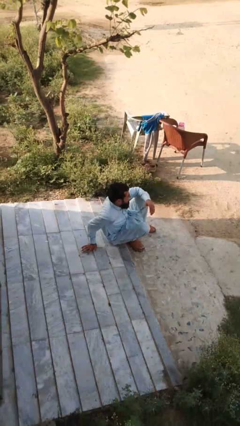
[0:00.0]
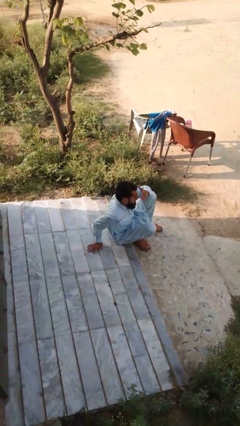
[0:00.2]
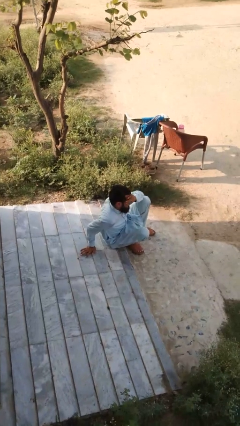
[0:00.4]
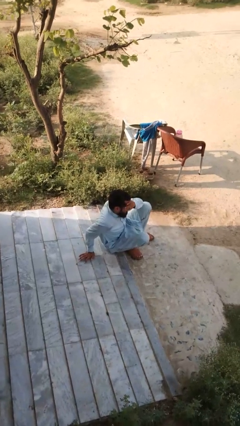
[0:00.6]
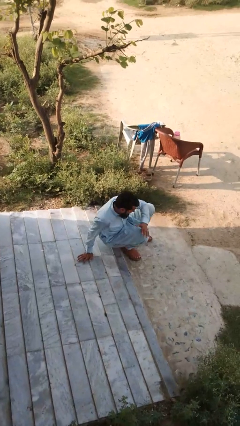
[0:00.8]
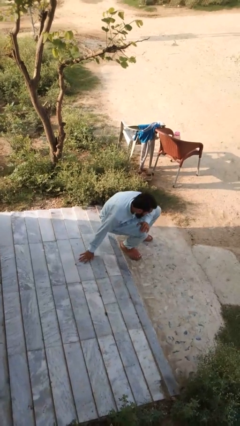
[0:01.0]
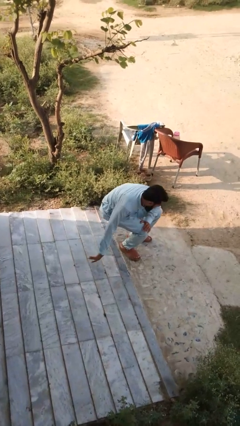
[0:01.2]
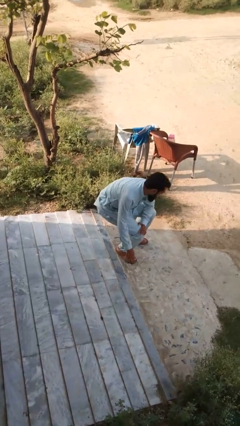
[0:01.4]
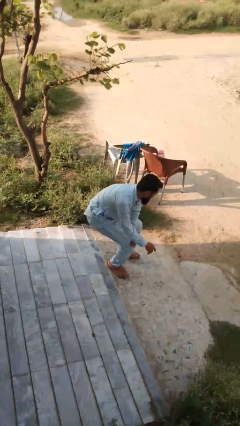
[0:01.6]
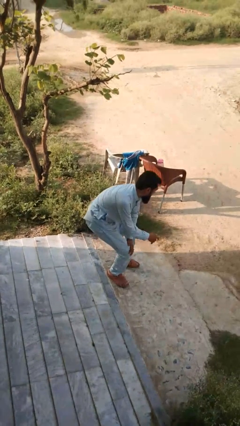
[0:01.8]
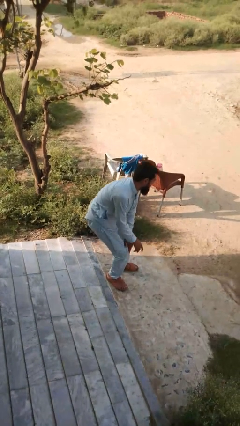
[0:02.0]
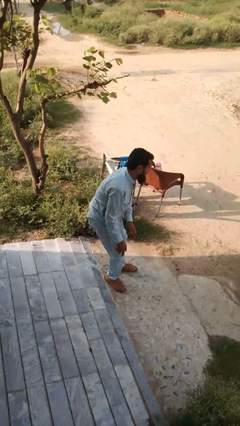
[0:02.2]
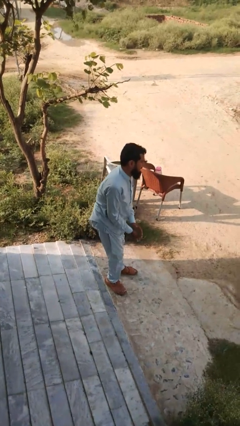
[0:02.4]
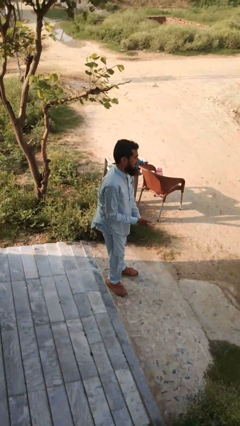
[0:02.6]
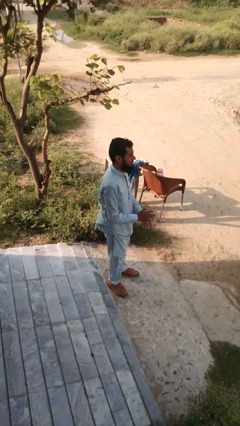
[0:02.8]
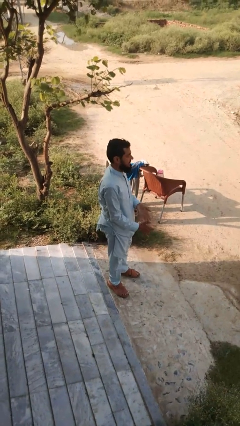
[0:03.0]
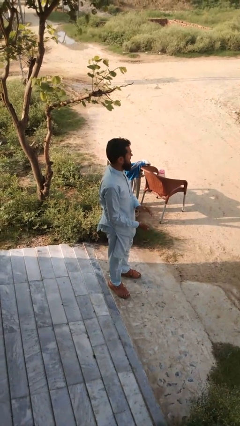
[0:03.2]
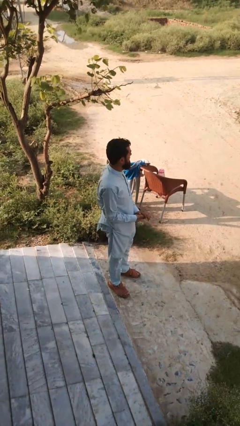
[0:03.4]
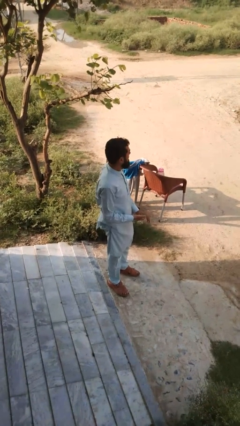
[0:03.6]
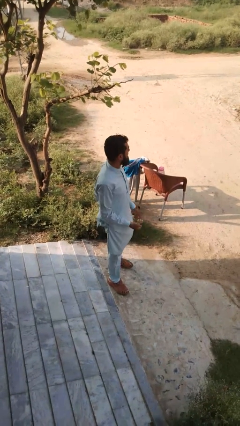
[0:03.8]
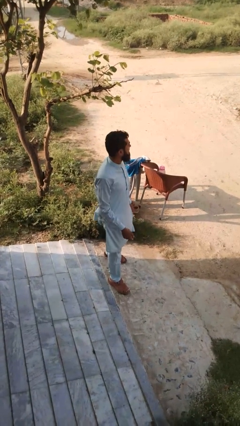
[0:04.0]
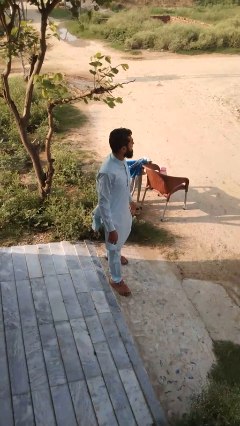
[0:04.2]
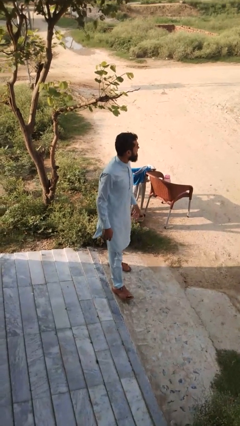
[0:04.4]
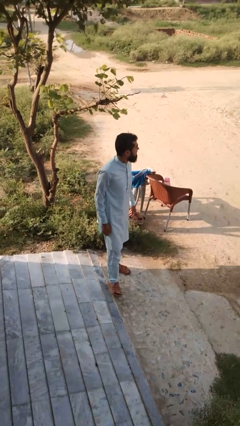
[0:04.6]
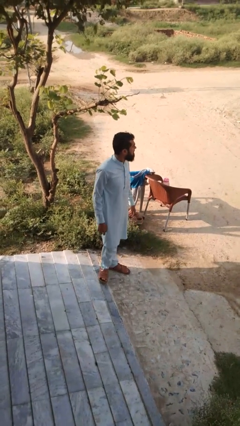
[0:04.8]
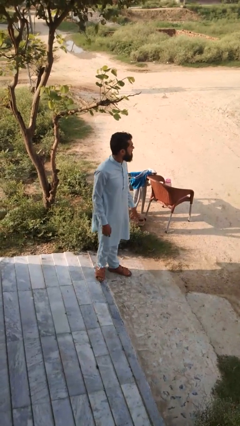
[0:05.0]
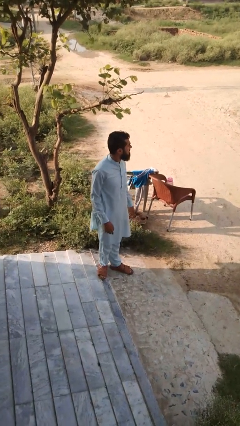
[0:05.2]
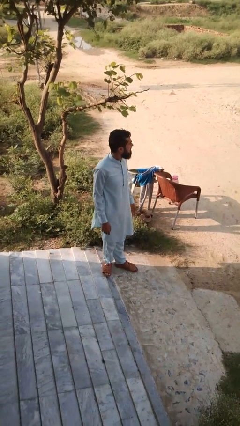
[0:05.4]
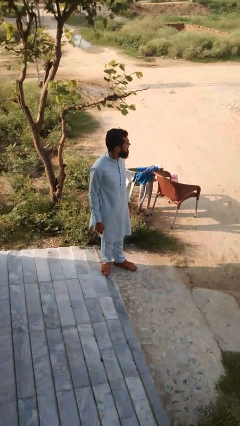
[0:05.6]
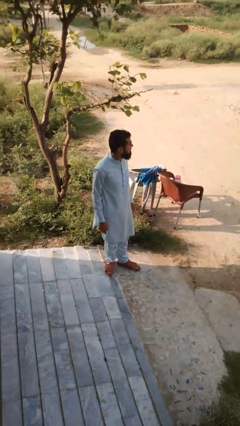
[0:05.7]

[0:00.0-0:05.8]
person stands up from floor

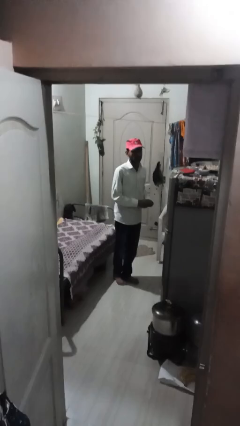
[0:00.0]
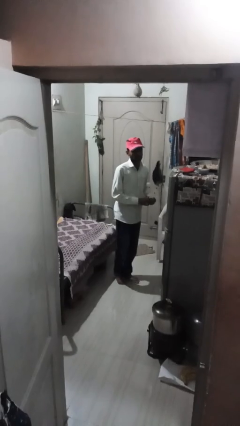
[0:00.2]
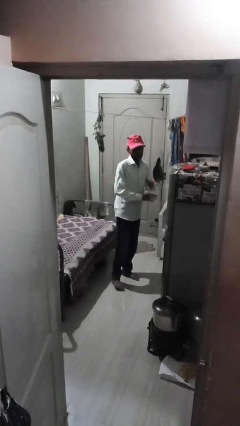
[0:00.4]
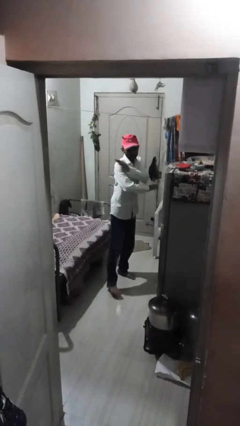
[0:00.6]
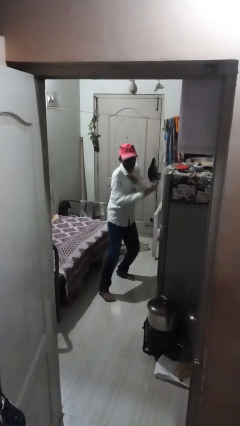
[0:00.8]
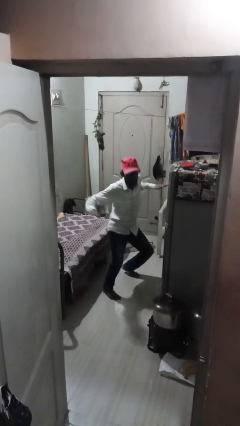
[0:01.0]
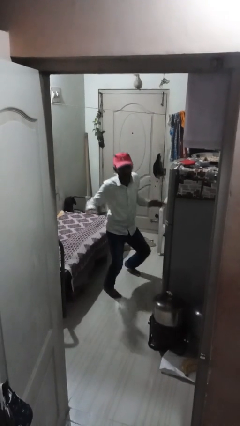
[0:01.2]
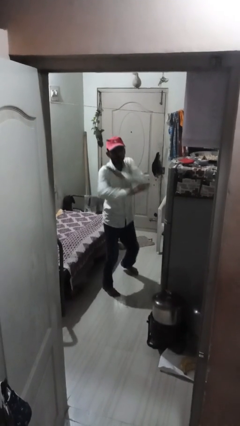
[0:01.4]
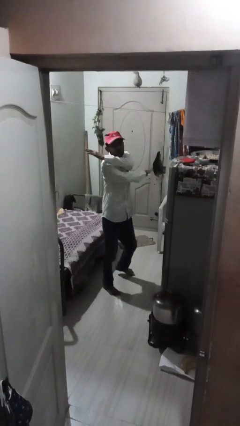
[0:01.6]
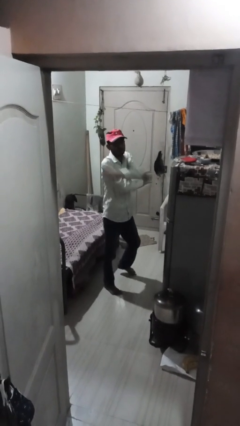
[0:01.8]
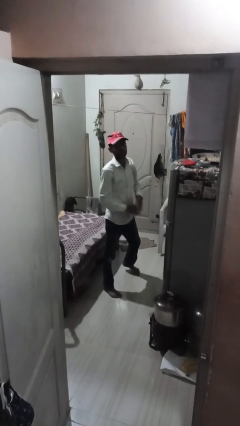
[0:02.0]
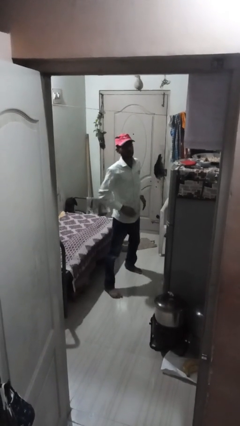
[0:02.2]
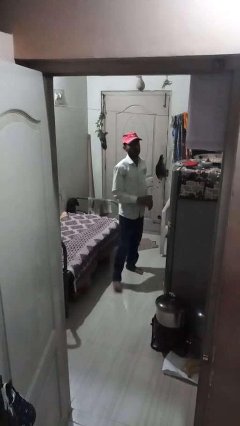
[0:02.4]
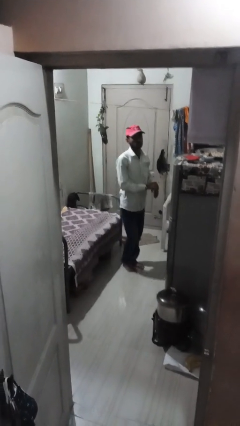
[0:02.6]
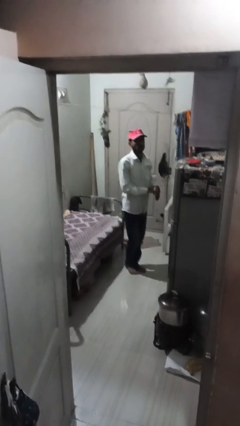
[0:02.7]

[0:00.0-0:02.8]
person karate chop

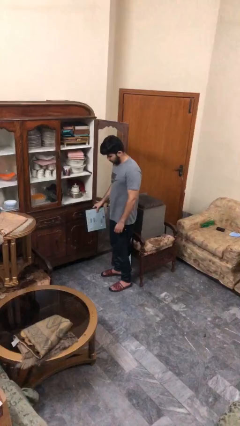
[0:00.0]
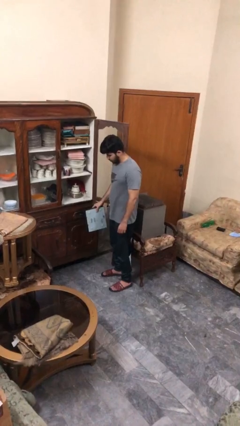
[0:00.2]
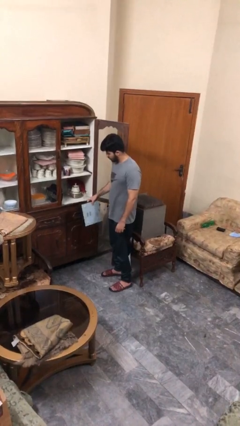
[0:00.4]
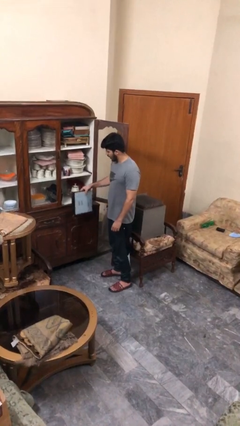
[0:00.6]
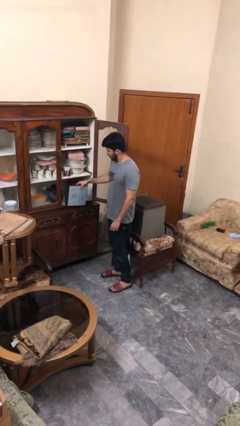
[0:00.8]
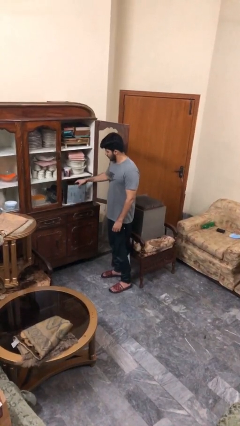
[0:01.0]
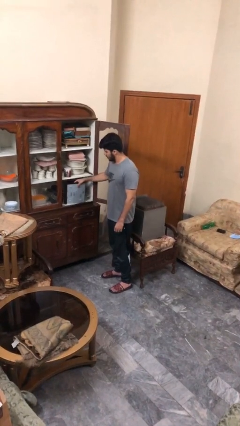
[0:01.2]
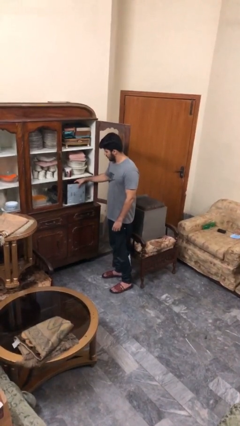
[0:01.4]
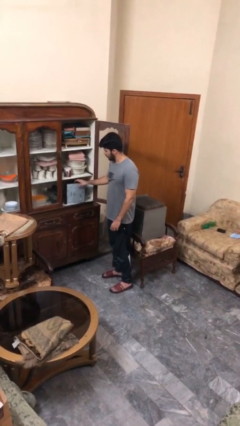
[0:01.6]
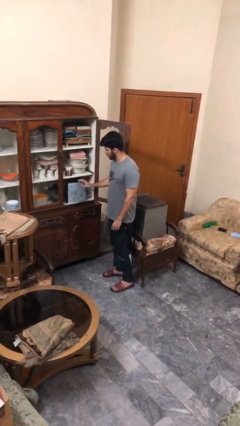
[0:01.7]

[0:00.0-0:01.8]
person puts down object on countertop

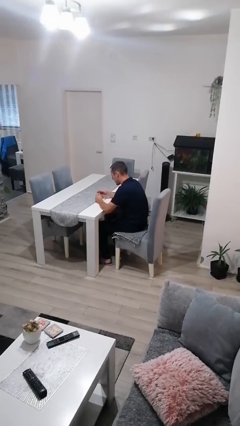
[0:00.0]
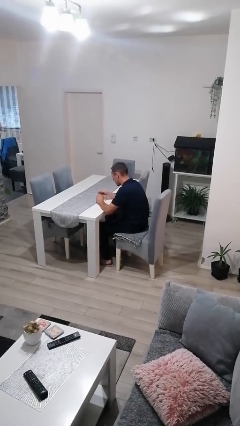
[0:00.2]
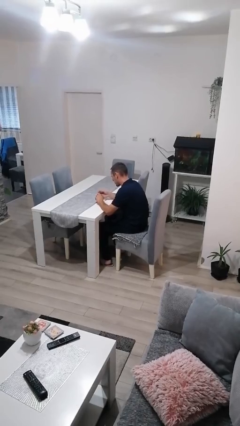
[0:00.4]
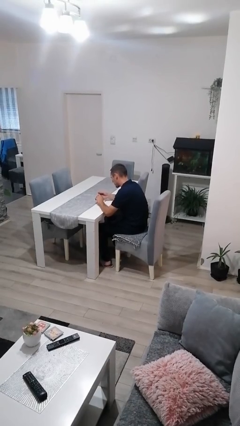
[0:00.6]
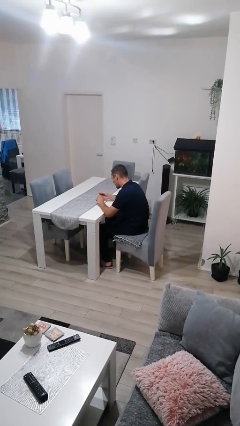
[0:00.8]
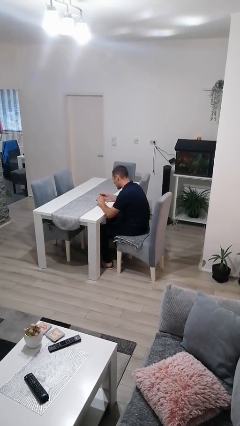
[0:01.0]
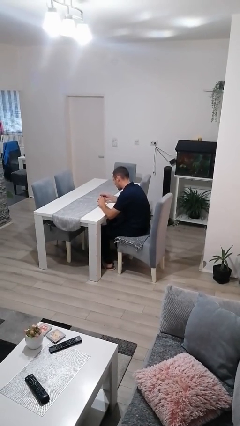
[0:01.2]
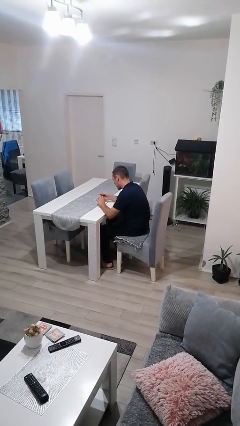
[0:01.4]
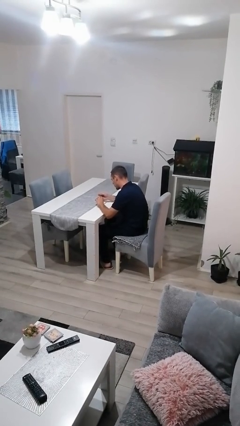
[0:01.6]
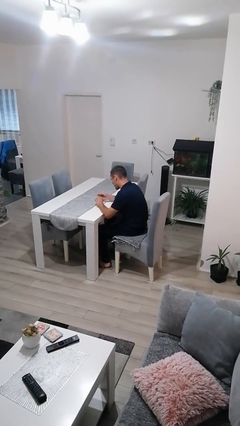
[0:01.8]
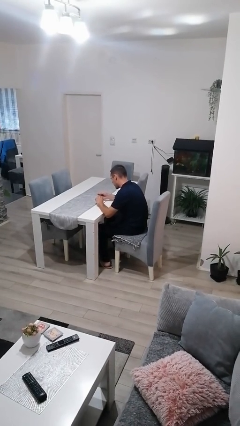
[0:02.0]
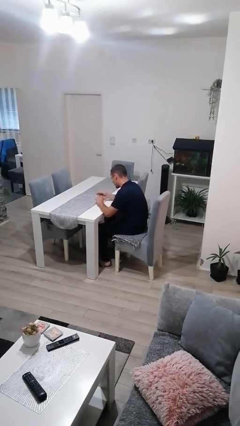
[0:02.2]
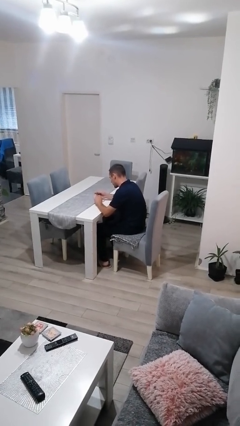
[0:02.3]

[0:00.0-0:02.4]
person clips fingernails

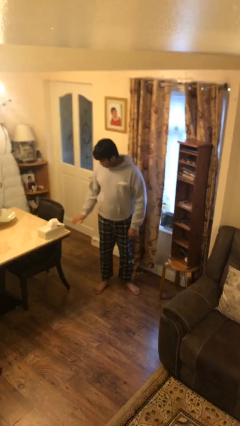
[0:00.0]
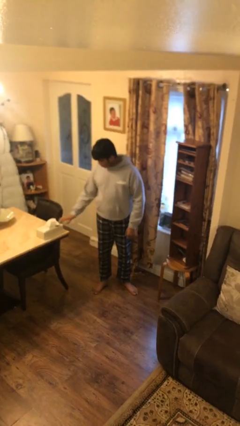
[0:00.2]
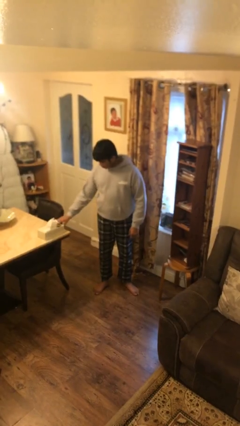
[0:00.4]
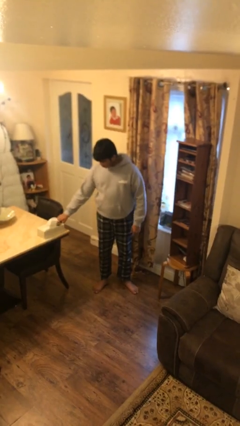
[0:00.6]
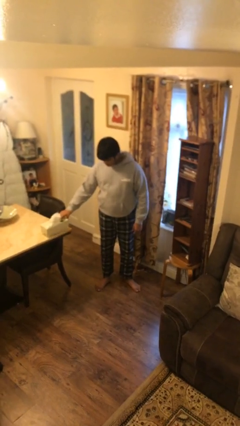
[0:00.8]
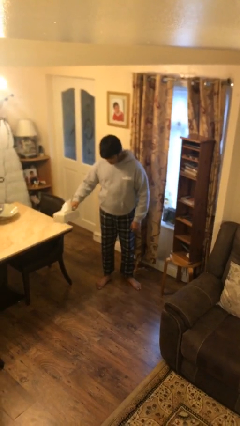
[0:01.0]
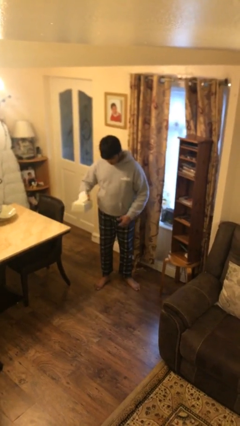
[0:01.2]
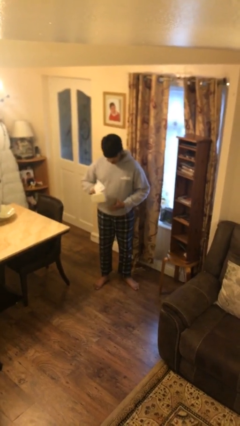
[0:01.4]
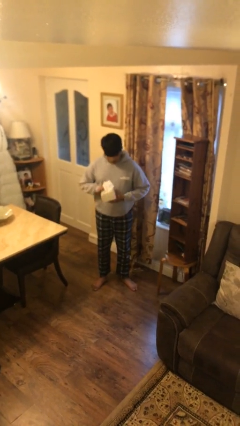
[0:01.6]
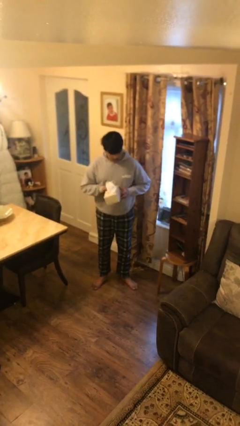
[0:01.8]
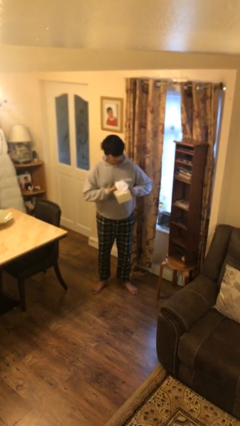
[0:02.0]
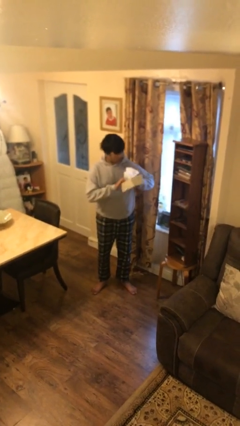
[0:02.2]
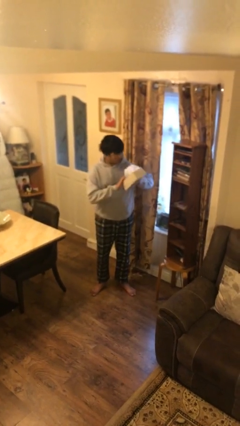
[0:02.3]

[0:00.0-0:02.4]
person picks up object from table

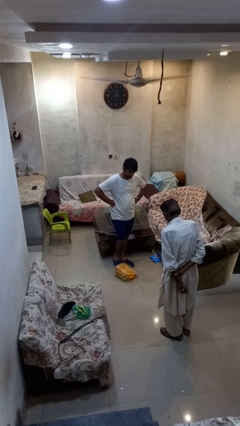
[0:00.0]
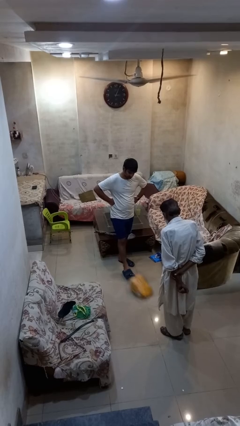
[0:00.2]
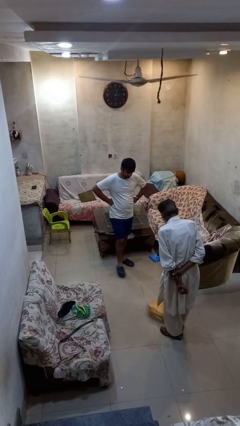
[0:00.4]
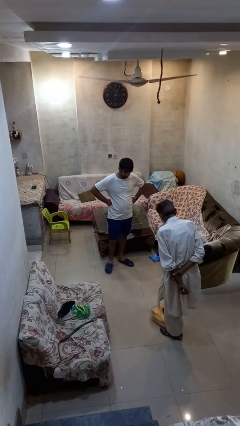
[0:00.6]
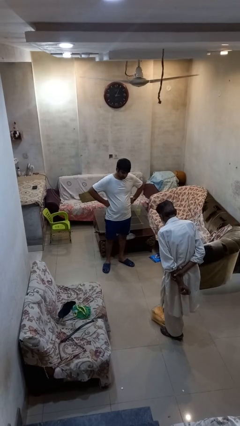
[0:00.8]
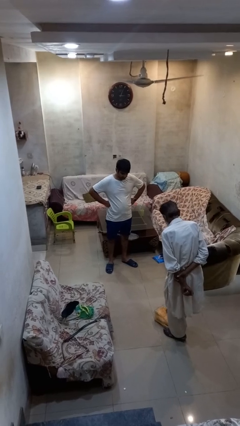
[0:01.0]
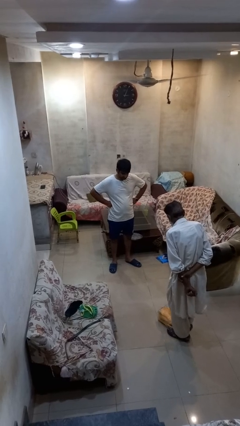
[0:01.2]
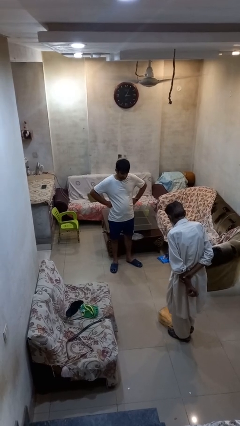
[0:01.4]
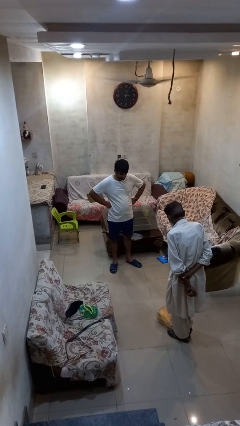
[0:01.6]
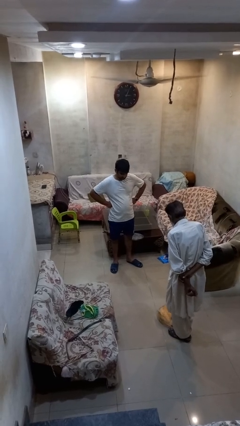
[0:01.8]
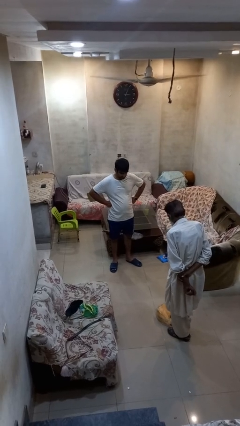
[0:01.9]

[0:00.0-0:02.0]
person kicks object to person

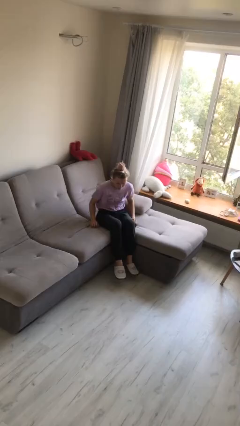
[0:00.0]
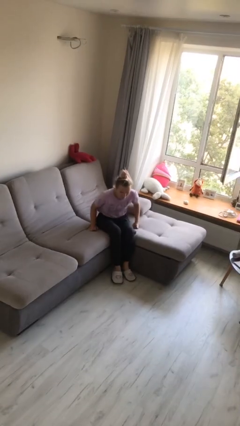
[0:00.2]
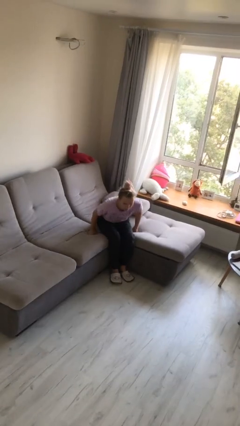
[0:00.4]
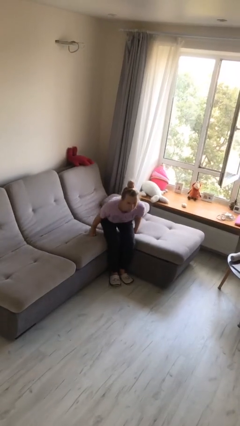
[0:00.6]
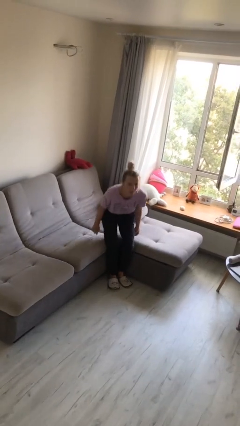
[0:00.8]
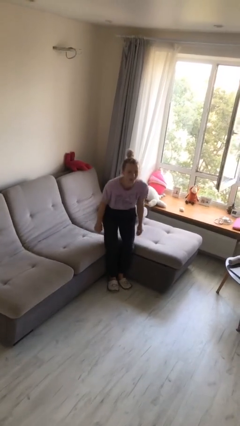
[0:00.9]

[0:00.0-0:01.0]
person stands up
